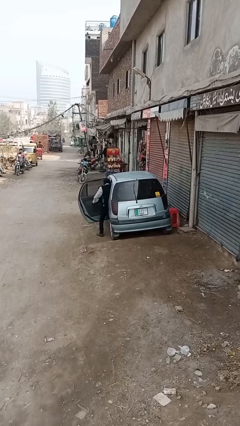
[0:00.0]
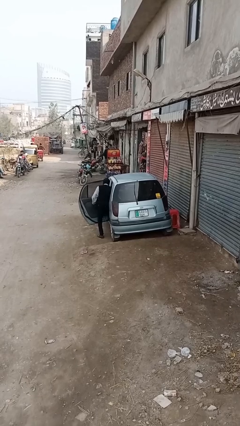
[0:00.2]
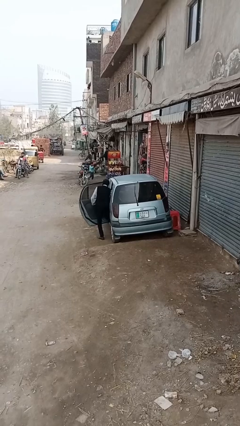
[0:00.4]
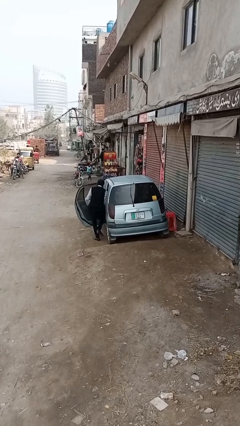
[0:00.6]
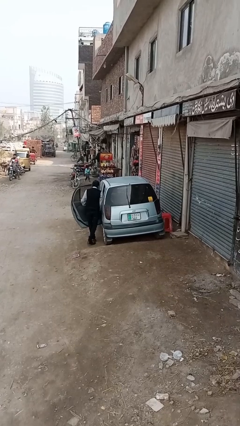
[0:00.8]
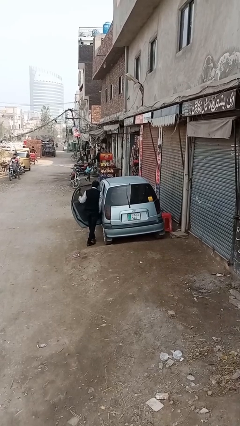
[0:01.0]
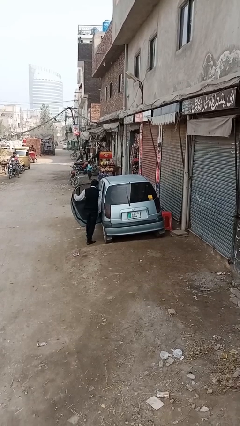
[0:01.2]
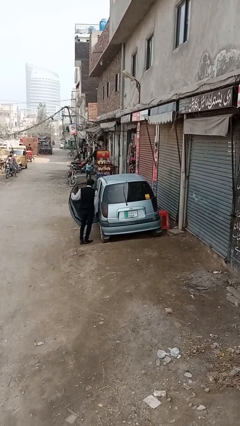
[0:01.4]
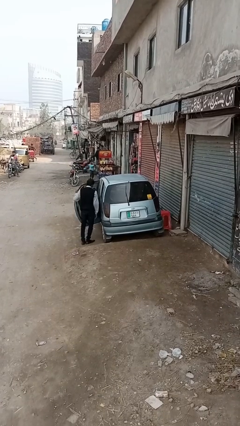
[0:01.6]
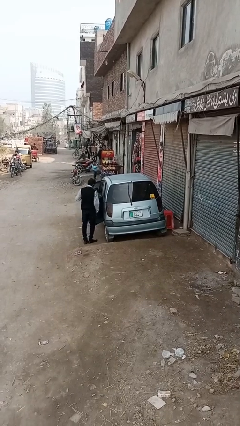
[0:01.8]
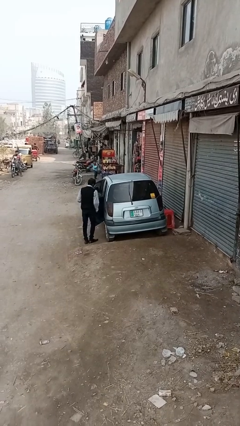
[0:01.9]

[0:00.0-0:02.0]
car drops off person

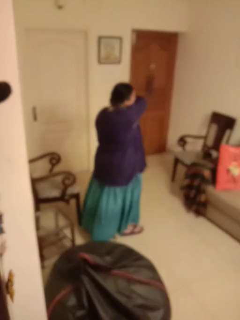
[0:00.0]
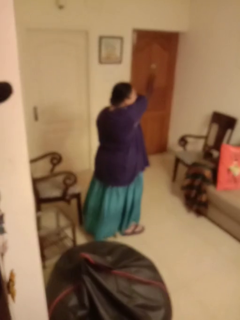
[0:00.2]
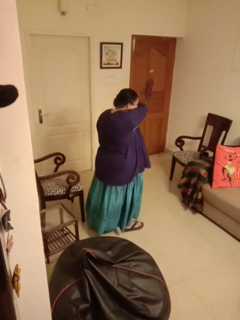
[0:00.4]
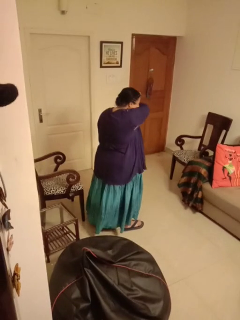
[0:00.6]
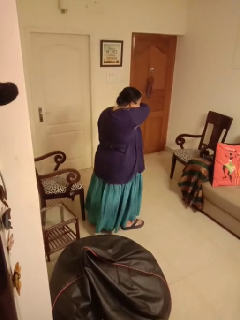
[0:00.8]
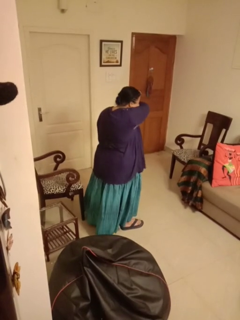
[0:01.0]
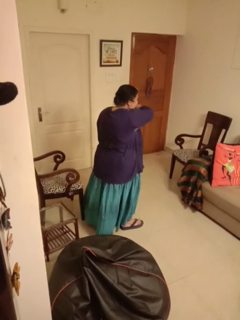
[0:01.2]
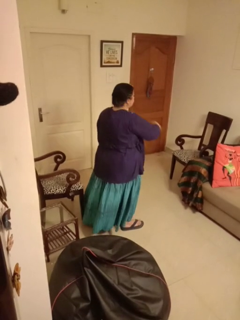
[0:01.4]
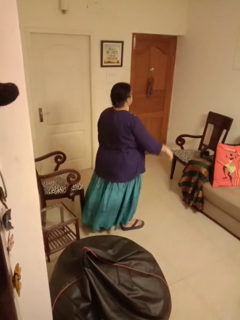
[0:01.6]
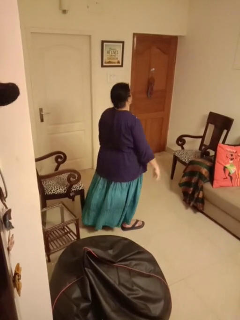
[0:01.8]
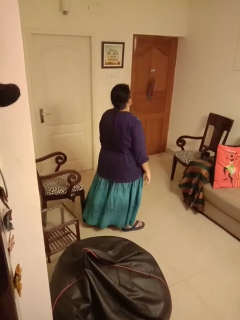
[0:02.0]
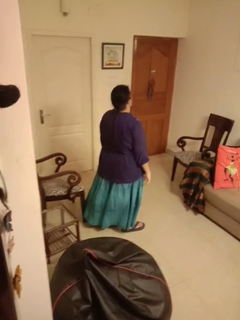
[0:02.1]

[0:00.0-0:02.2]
person sneezes into arm

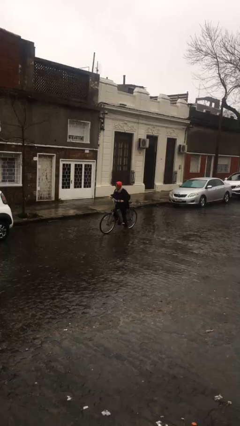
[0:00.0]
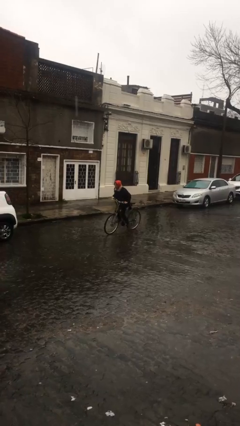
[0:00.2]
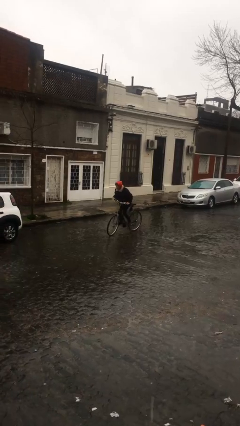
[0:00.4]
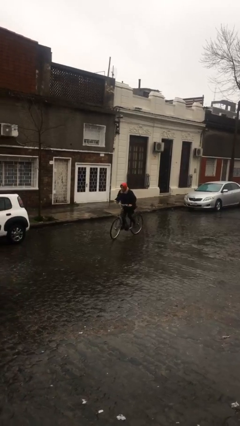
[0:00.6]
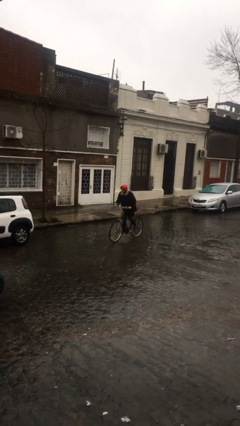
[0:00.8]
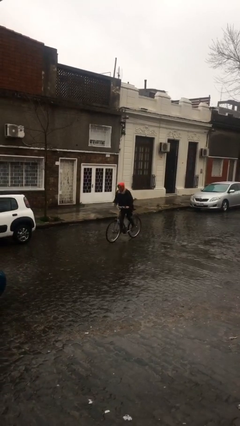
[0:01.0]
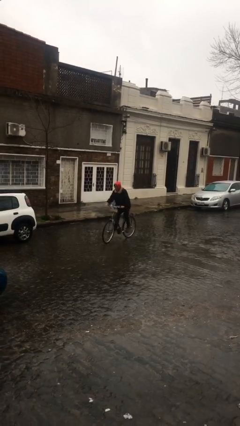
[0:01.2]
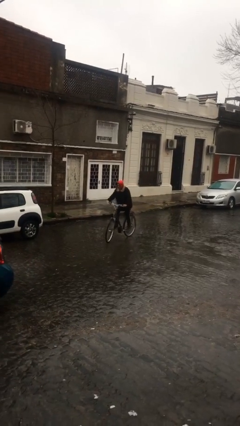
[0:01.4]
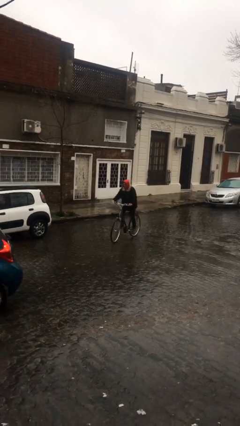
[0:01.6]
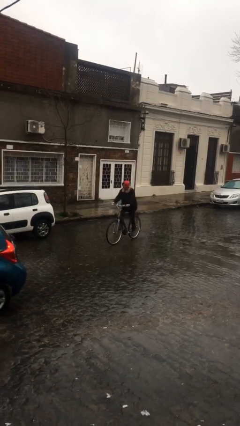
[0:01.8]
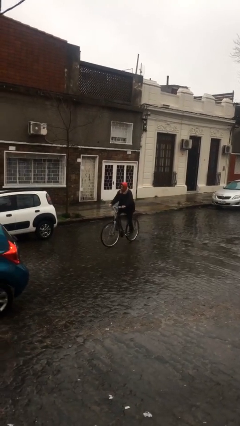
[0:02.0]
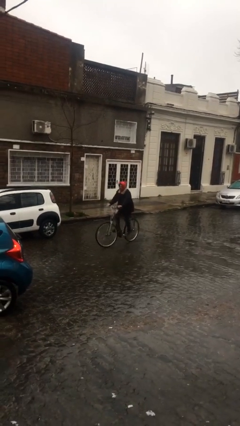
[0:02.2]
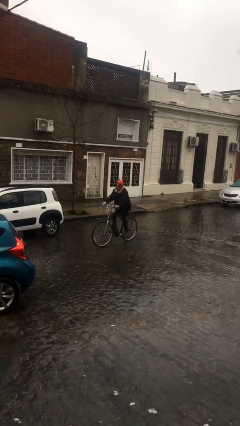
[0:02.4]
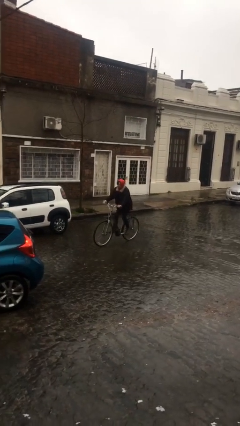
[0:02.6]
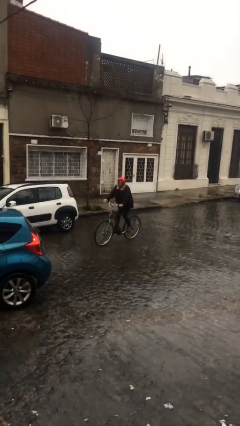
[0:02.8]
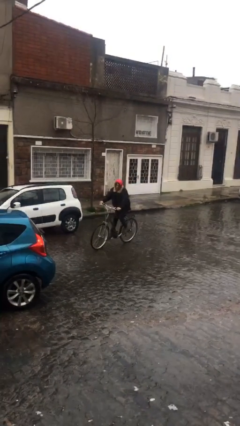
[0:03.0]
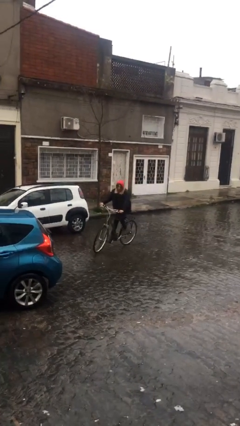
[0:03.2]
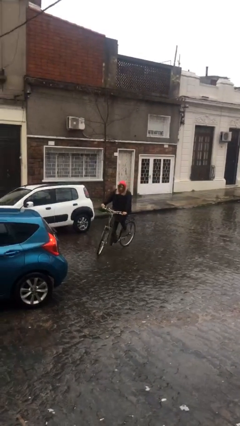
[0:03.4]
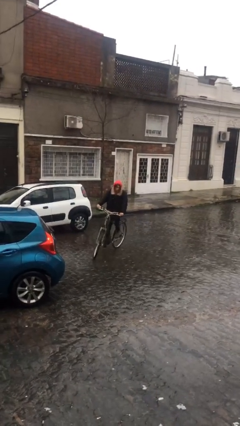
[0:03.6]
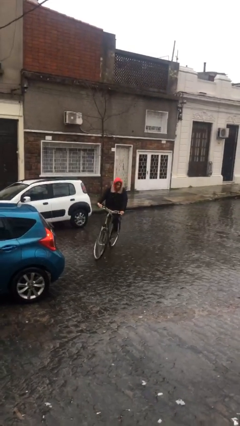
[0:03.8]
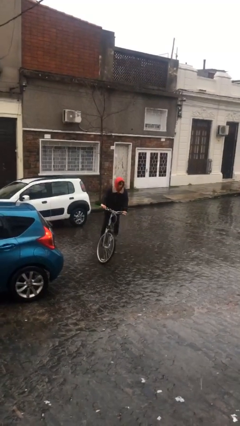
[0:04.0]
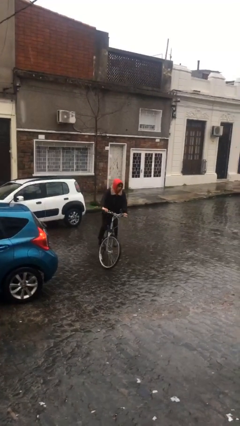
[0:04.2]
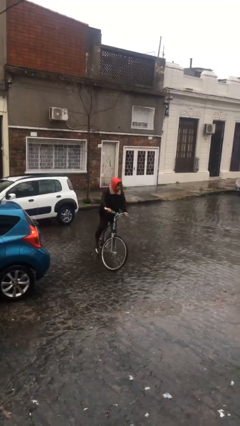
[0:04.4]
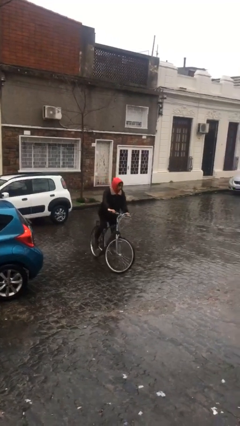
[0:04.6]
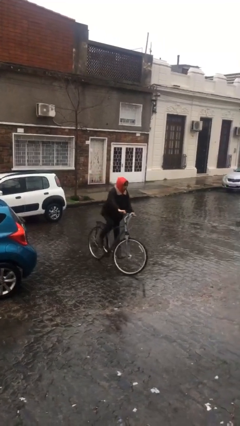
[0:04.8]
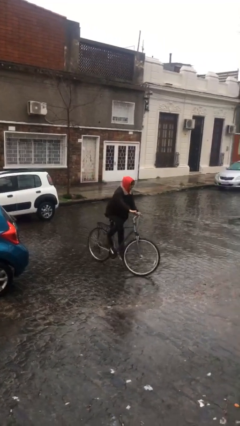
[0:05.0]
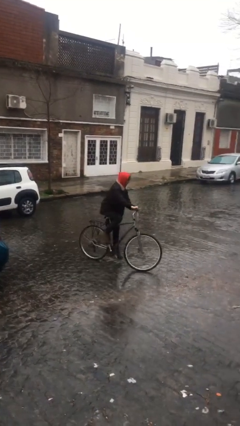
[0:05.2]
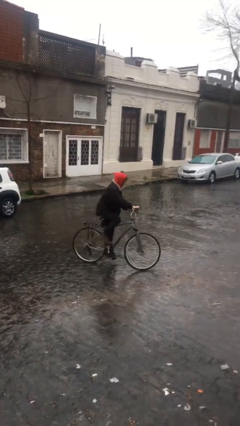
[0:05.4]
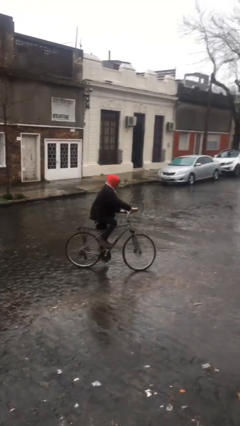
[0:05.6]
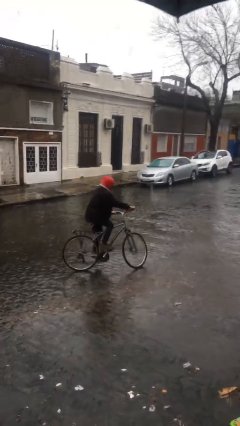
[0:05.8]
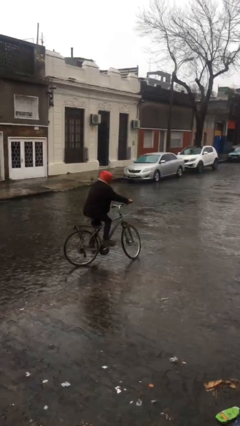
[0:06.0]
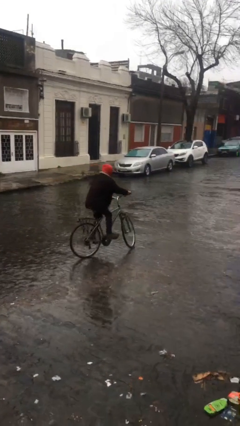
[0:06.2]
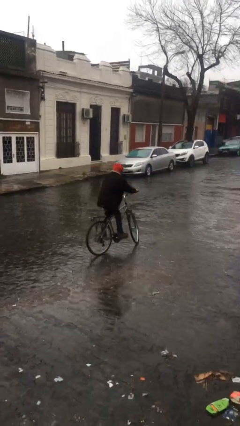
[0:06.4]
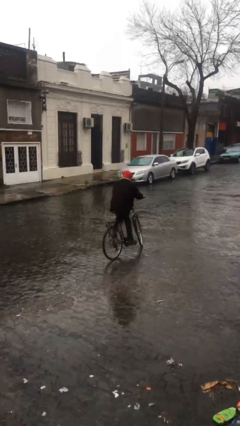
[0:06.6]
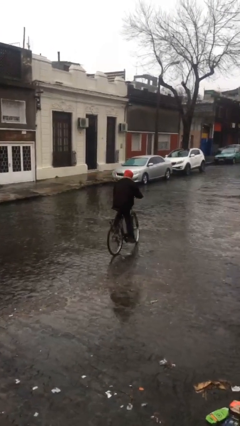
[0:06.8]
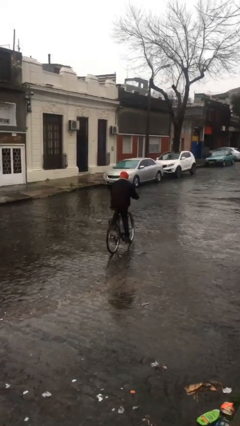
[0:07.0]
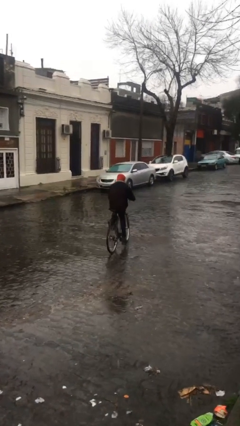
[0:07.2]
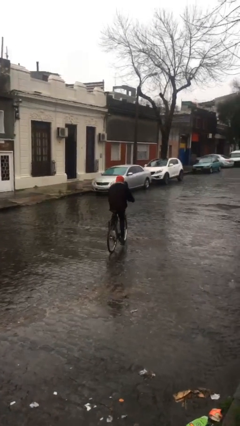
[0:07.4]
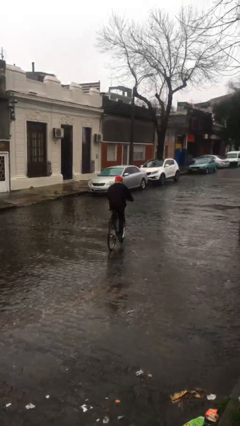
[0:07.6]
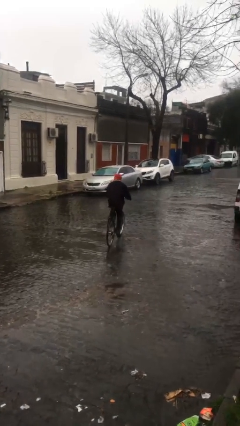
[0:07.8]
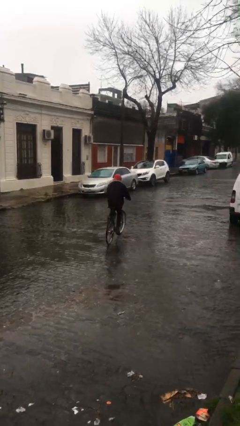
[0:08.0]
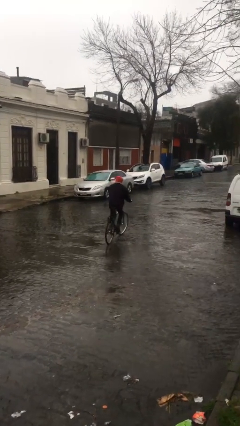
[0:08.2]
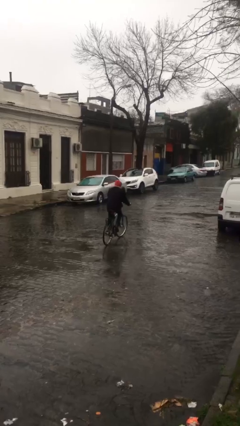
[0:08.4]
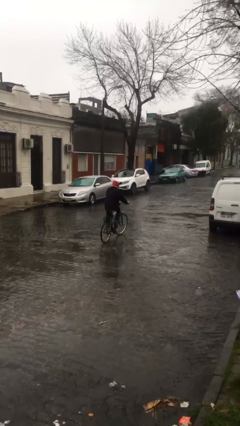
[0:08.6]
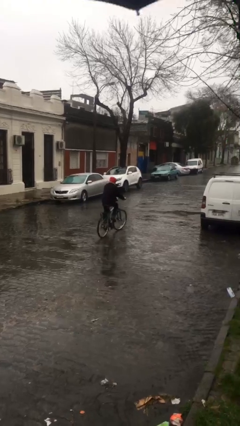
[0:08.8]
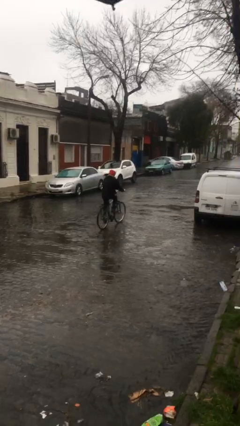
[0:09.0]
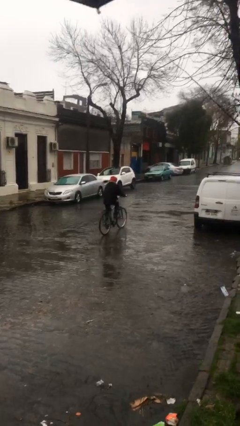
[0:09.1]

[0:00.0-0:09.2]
person rides bicycle

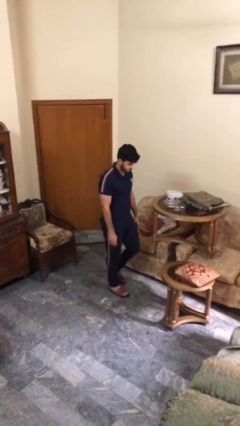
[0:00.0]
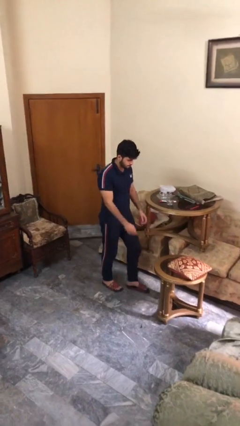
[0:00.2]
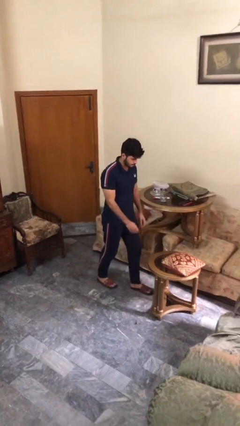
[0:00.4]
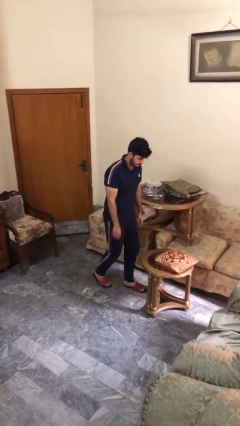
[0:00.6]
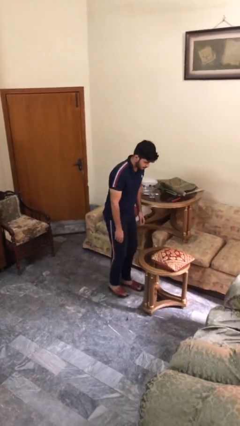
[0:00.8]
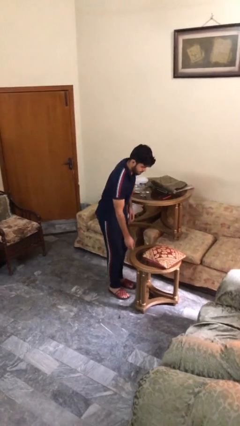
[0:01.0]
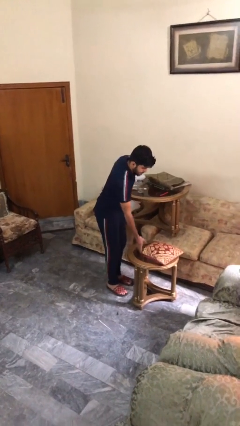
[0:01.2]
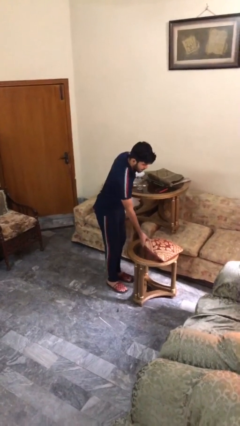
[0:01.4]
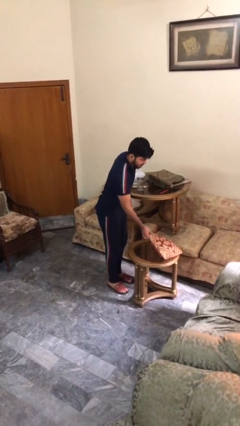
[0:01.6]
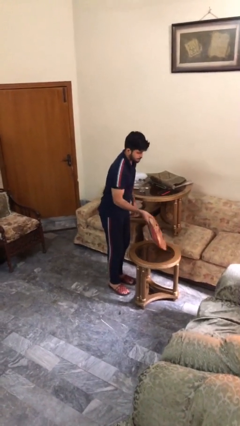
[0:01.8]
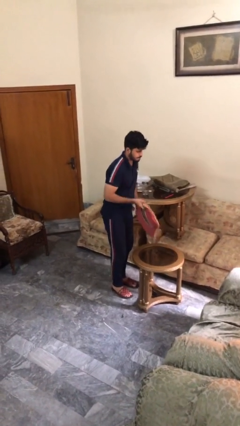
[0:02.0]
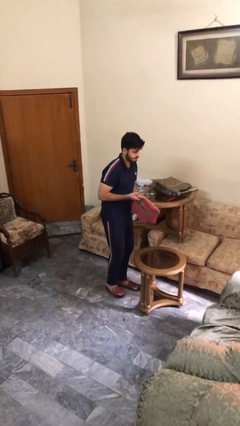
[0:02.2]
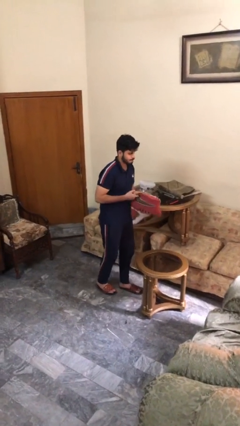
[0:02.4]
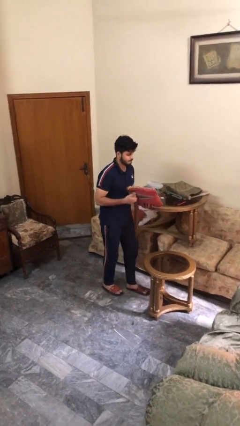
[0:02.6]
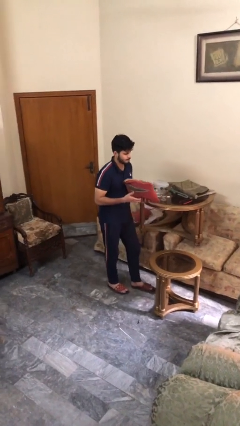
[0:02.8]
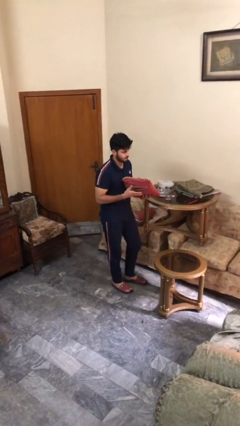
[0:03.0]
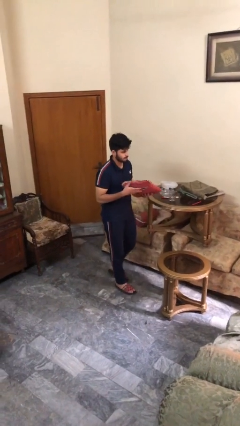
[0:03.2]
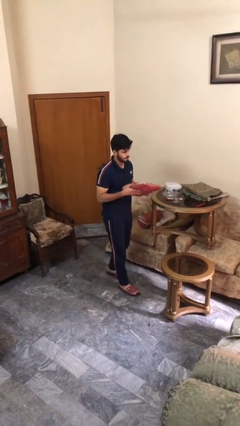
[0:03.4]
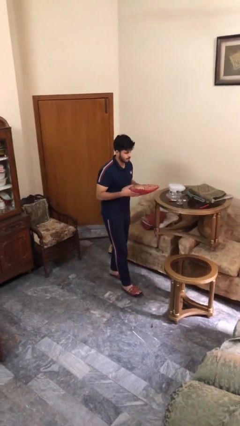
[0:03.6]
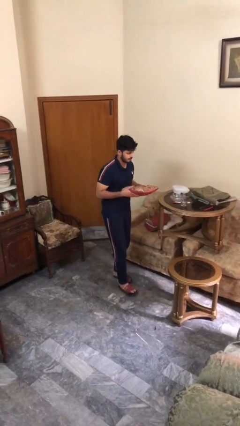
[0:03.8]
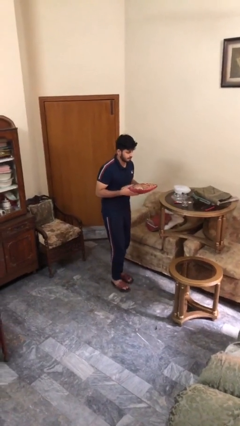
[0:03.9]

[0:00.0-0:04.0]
person picks up object from table

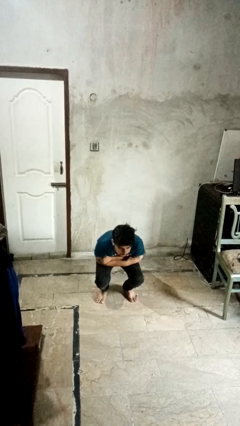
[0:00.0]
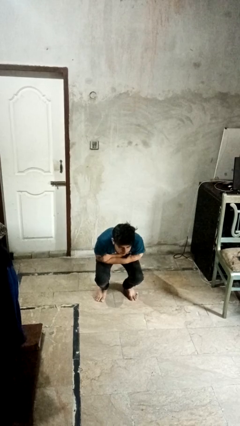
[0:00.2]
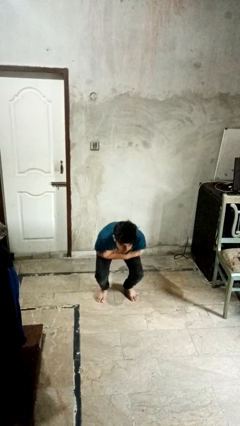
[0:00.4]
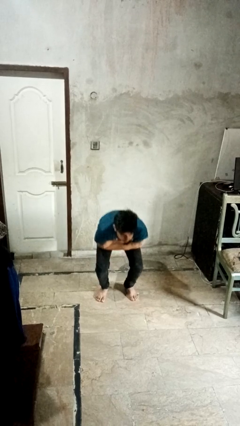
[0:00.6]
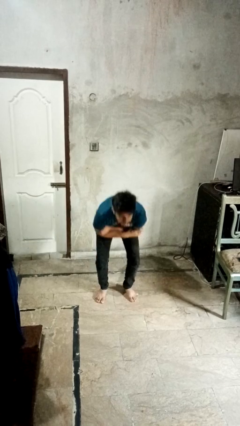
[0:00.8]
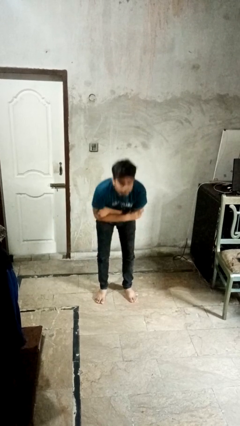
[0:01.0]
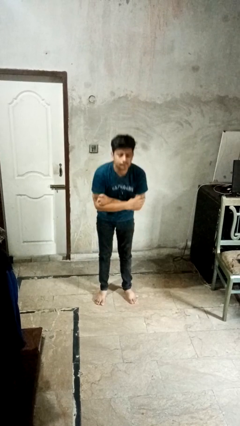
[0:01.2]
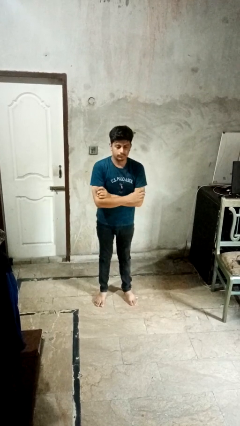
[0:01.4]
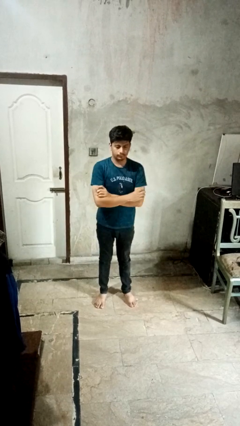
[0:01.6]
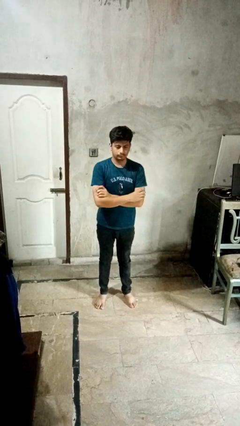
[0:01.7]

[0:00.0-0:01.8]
person stands up
